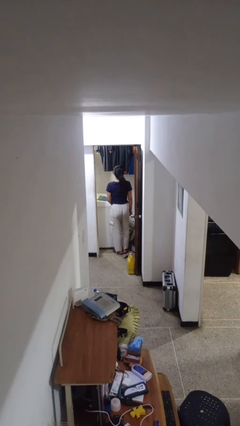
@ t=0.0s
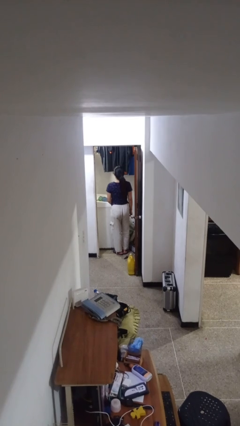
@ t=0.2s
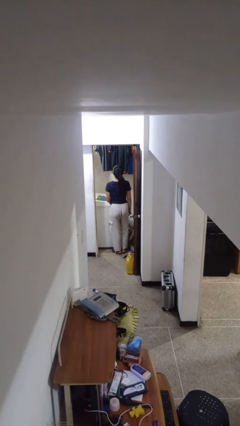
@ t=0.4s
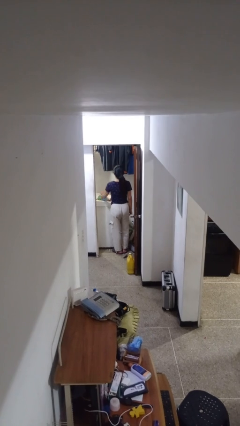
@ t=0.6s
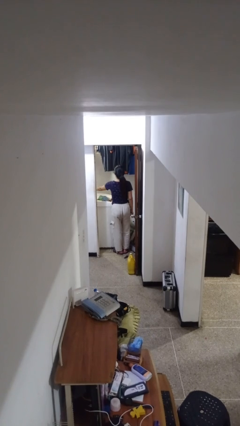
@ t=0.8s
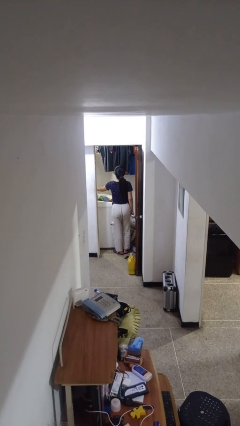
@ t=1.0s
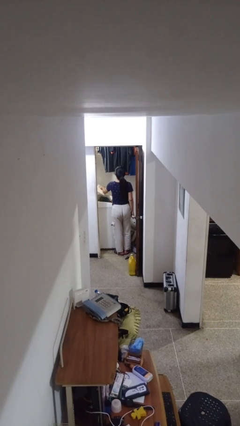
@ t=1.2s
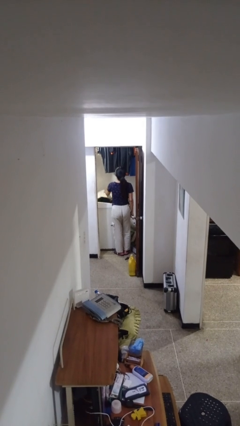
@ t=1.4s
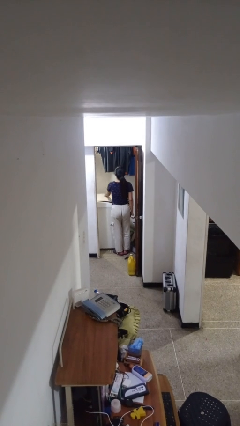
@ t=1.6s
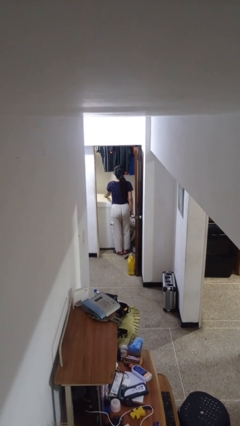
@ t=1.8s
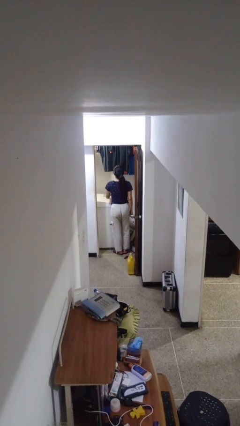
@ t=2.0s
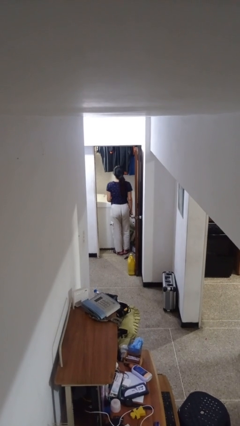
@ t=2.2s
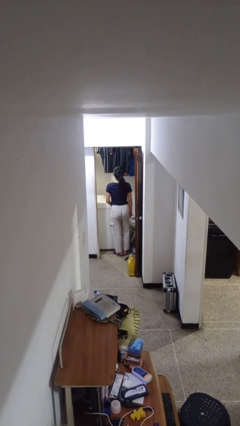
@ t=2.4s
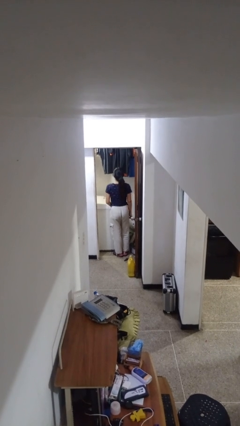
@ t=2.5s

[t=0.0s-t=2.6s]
person closes clothes washer

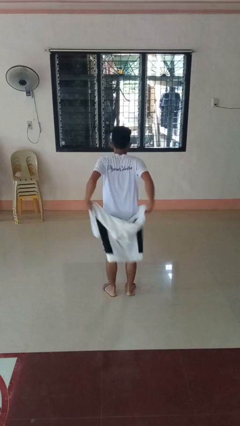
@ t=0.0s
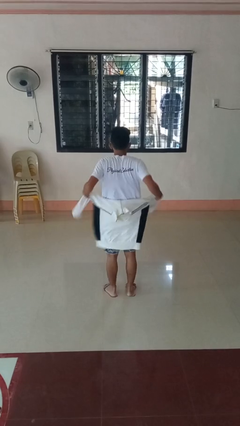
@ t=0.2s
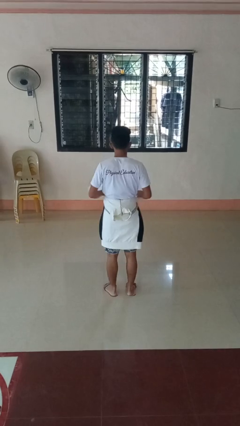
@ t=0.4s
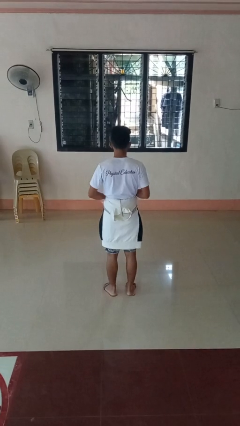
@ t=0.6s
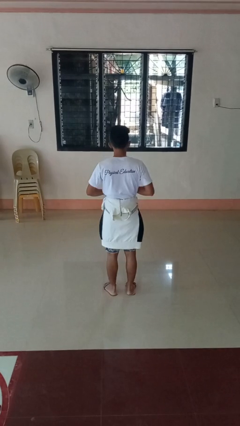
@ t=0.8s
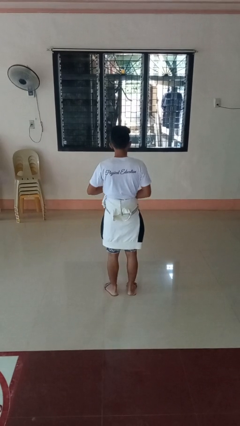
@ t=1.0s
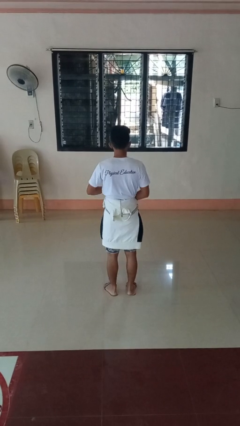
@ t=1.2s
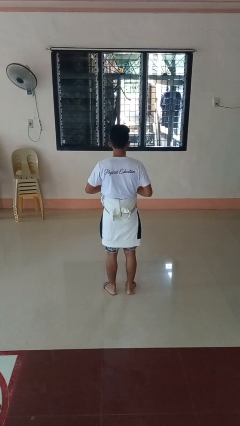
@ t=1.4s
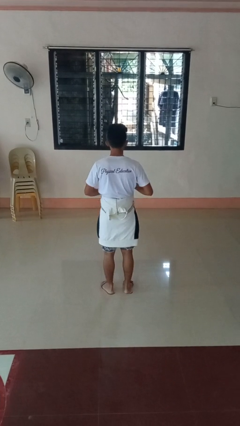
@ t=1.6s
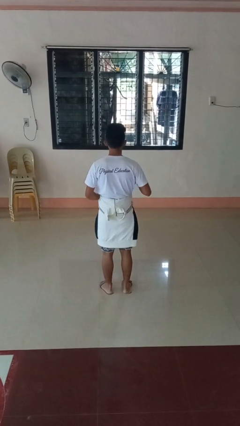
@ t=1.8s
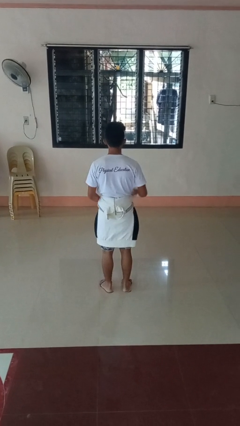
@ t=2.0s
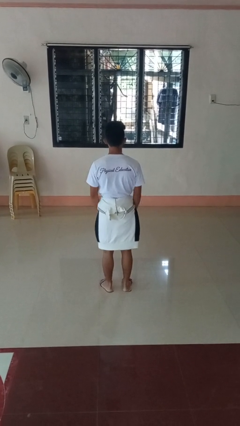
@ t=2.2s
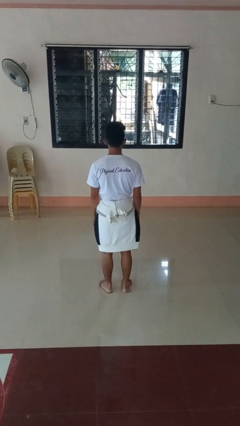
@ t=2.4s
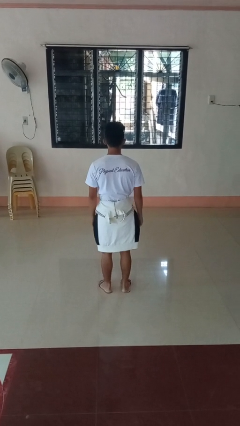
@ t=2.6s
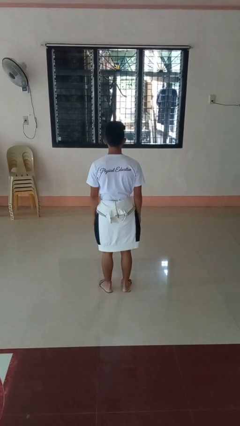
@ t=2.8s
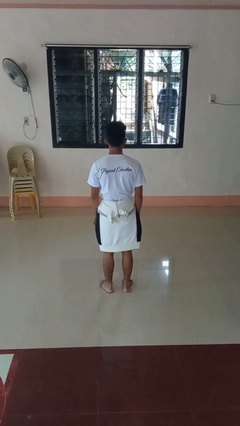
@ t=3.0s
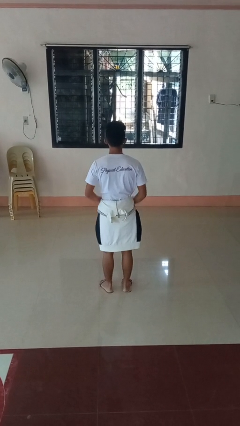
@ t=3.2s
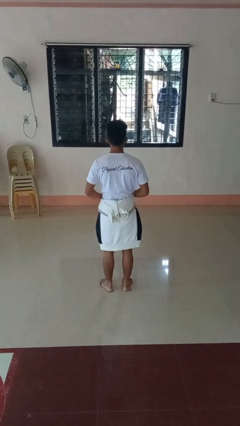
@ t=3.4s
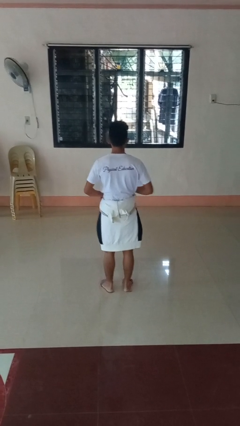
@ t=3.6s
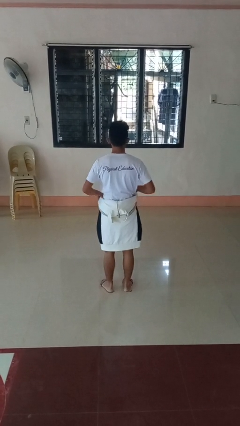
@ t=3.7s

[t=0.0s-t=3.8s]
person ties jacket around waist

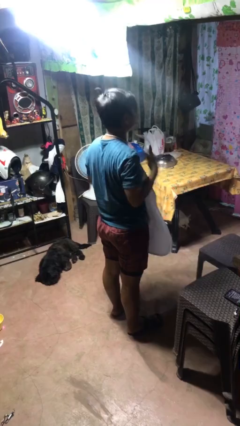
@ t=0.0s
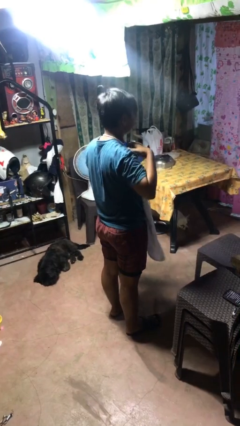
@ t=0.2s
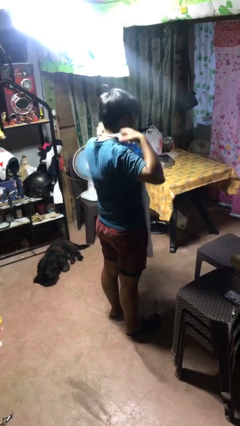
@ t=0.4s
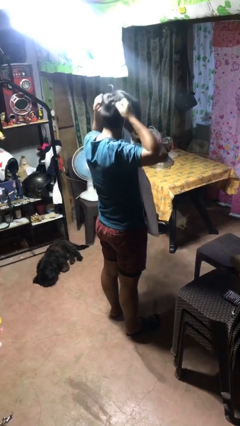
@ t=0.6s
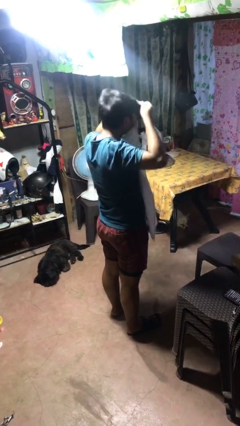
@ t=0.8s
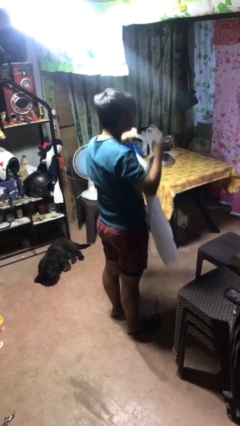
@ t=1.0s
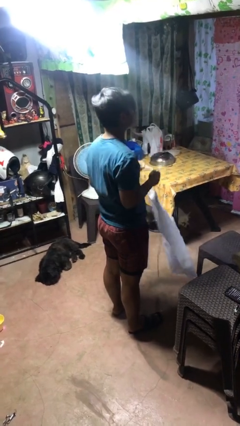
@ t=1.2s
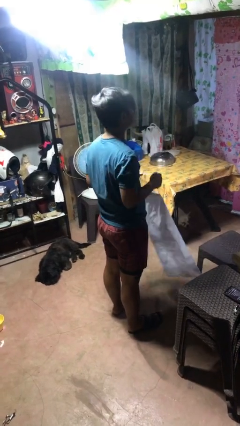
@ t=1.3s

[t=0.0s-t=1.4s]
person takes off apron

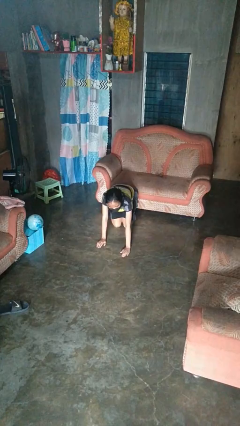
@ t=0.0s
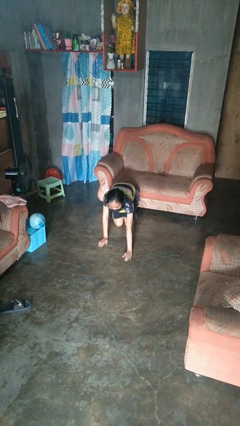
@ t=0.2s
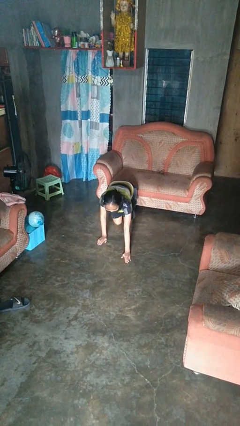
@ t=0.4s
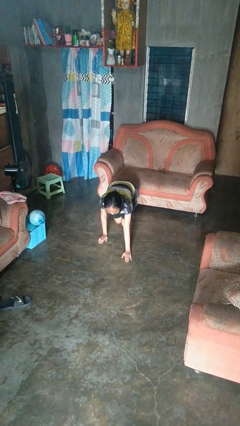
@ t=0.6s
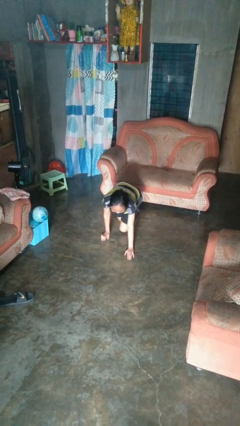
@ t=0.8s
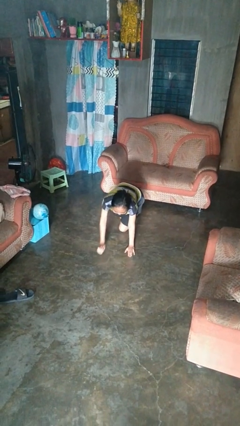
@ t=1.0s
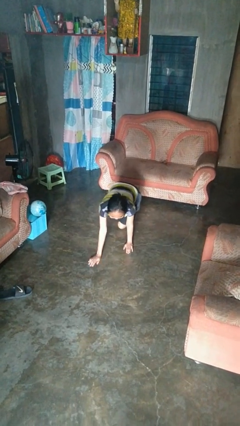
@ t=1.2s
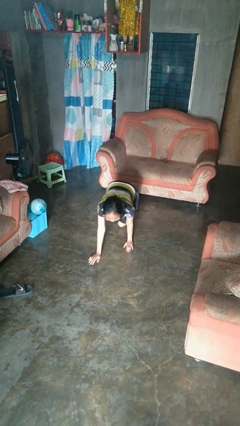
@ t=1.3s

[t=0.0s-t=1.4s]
person crawls

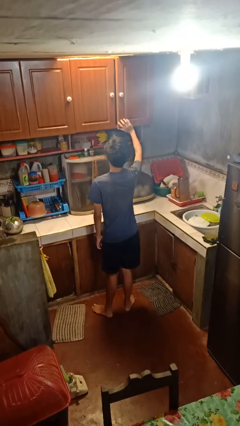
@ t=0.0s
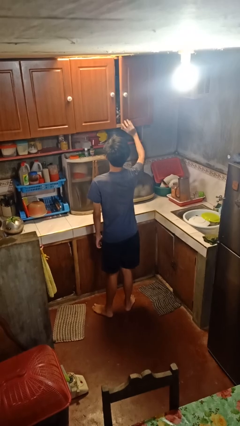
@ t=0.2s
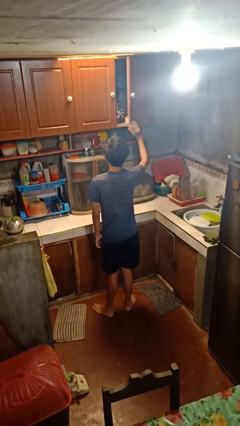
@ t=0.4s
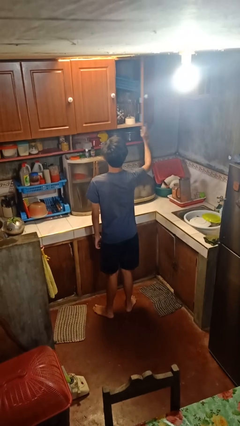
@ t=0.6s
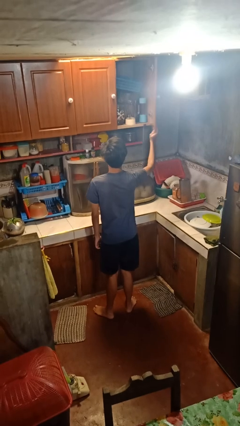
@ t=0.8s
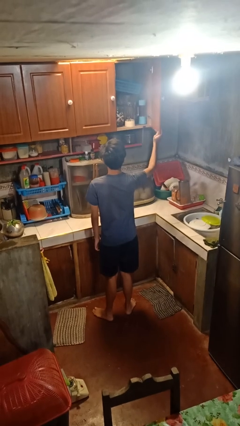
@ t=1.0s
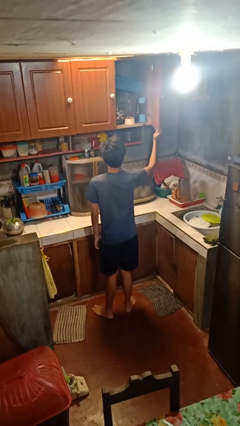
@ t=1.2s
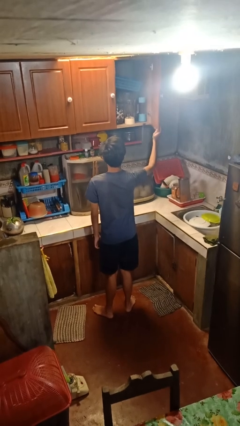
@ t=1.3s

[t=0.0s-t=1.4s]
person opens cabinet

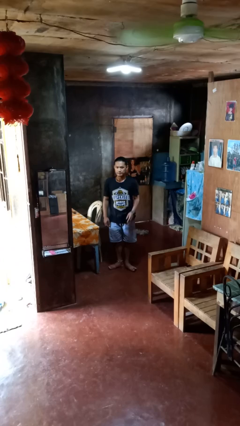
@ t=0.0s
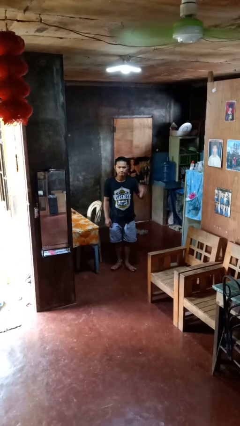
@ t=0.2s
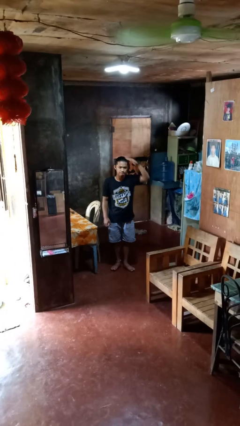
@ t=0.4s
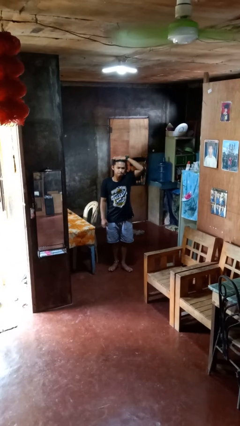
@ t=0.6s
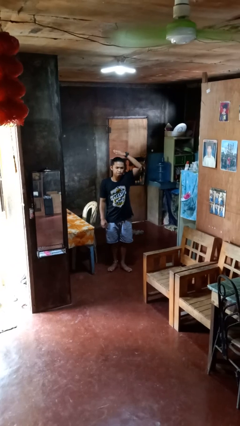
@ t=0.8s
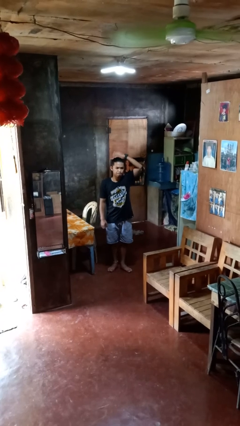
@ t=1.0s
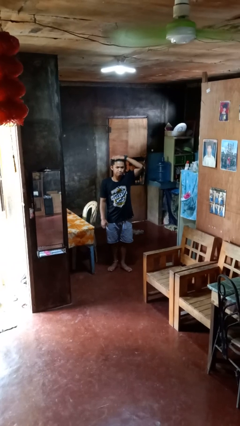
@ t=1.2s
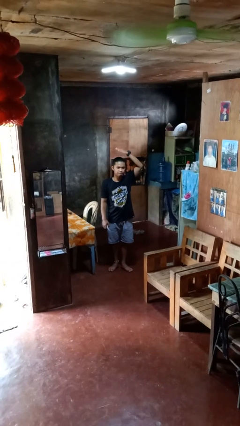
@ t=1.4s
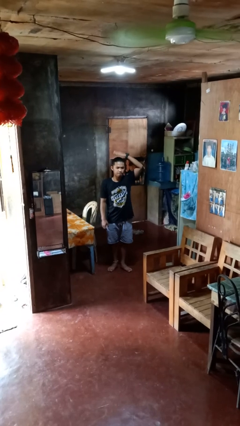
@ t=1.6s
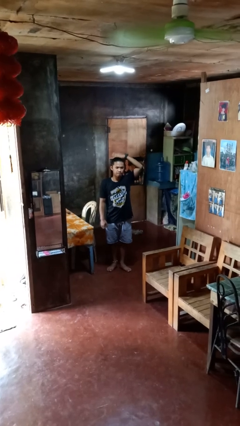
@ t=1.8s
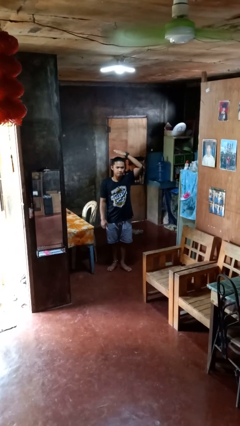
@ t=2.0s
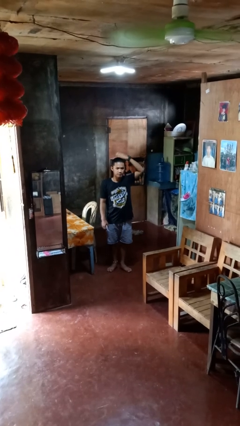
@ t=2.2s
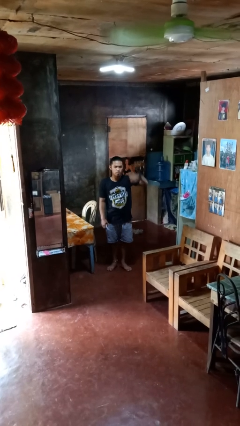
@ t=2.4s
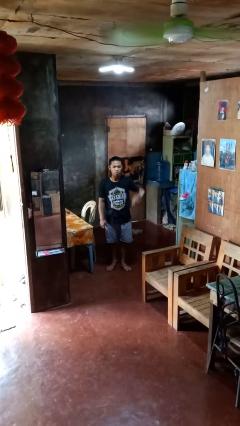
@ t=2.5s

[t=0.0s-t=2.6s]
person pats head

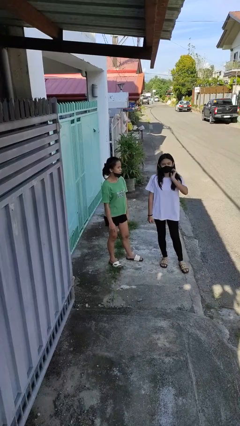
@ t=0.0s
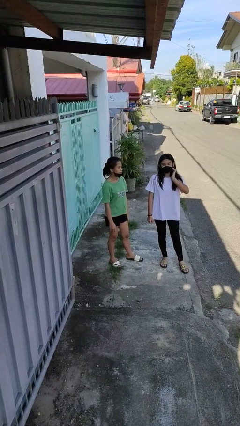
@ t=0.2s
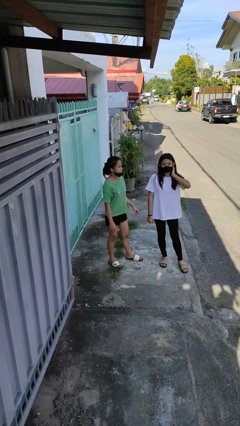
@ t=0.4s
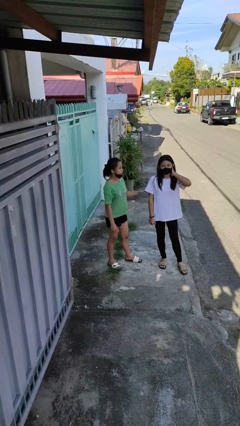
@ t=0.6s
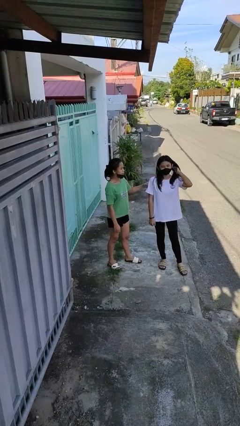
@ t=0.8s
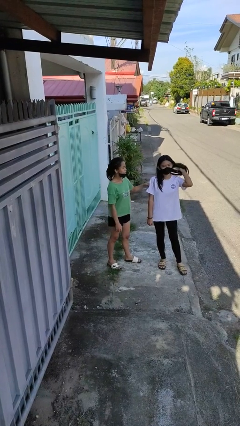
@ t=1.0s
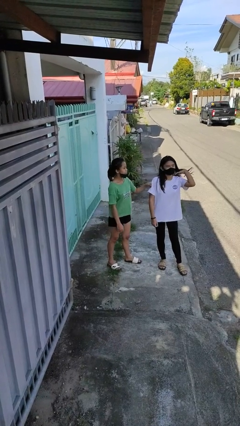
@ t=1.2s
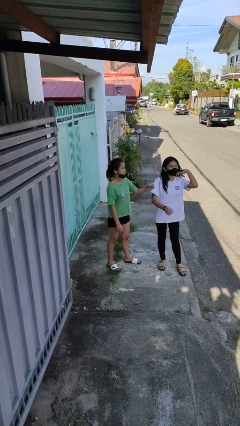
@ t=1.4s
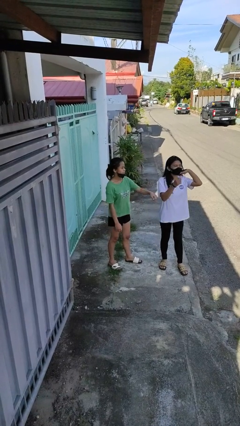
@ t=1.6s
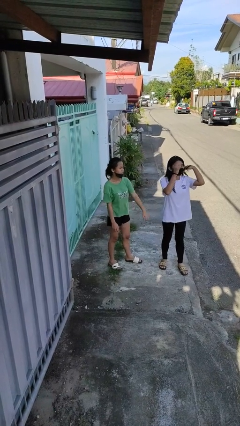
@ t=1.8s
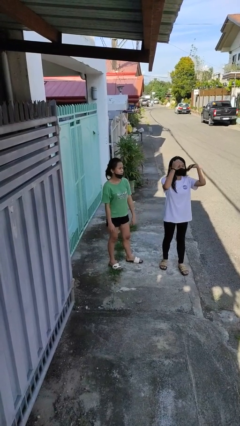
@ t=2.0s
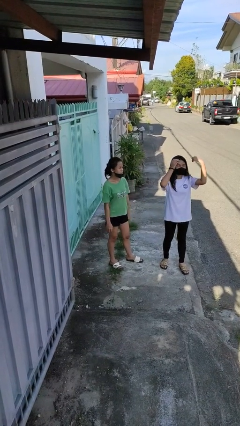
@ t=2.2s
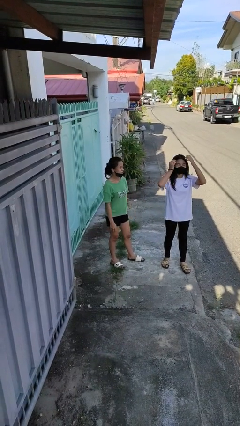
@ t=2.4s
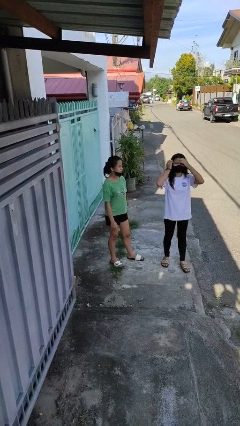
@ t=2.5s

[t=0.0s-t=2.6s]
person pounds shoulders of person

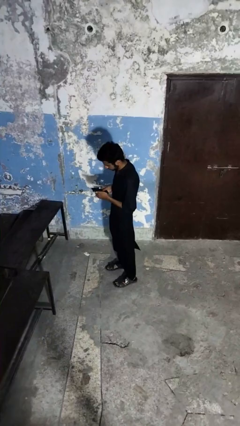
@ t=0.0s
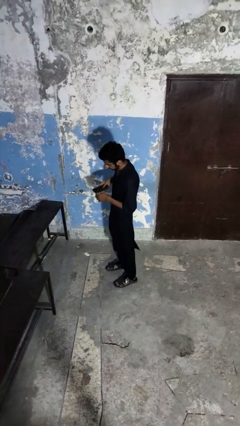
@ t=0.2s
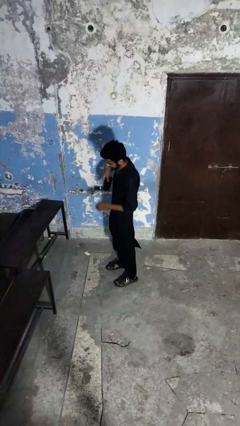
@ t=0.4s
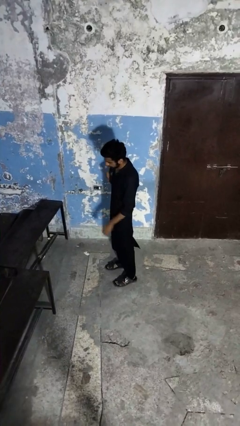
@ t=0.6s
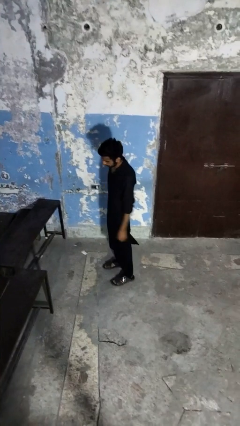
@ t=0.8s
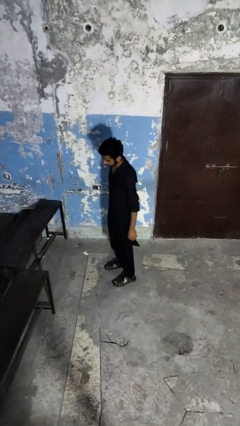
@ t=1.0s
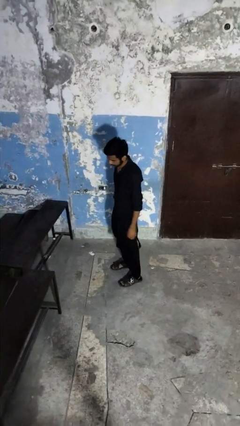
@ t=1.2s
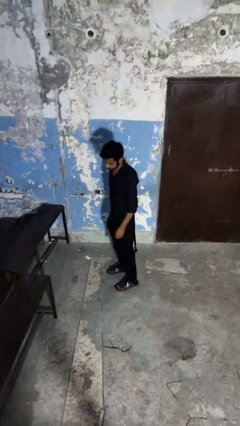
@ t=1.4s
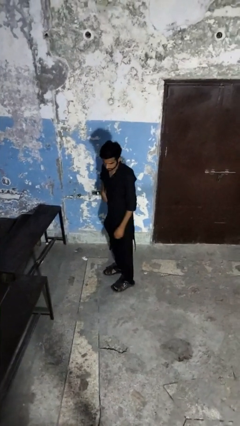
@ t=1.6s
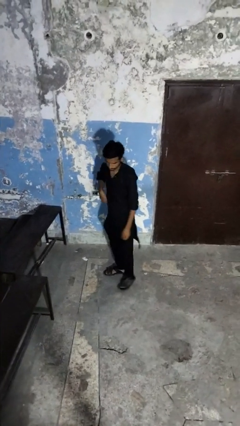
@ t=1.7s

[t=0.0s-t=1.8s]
person puts phone into pocket
